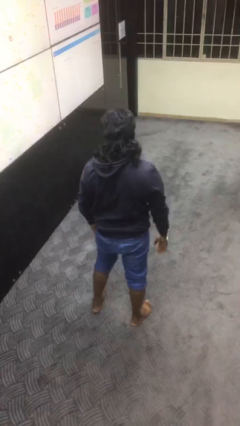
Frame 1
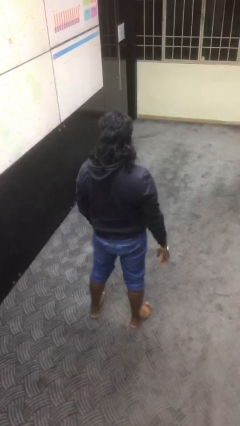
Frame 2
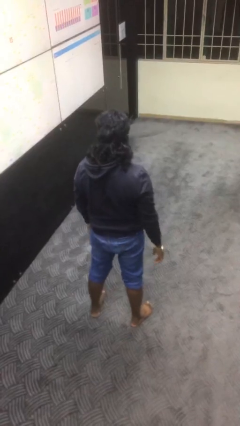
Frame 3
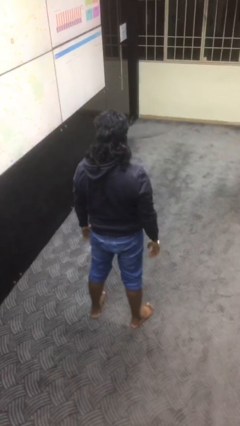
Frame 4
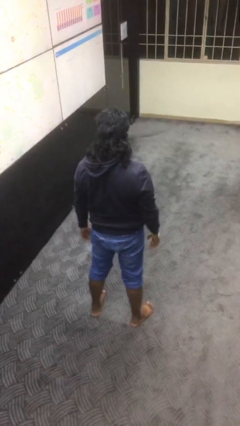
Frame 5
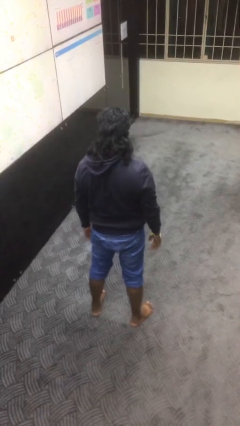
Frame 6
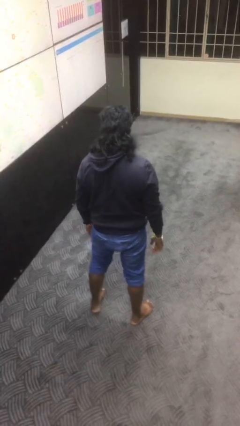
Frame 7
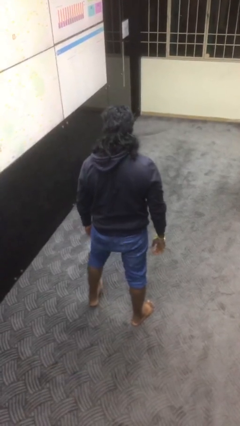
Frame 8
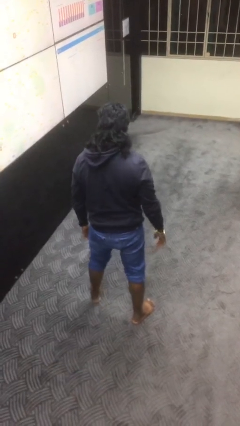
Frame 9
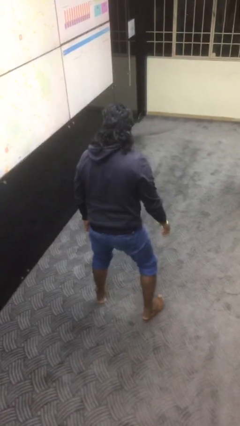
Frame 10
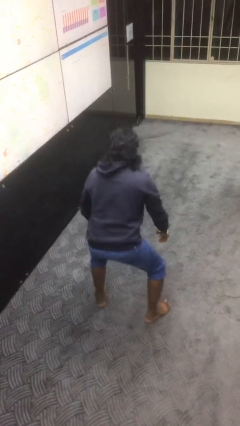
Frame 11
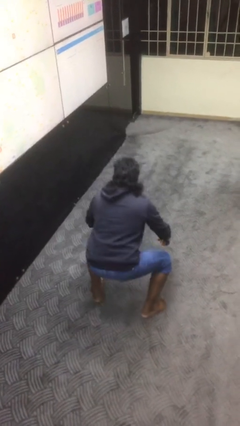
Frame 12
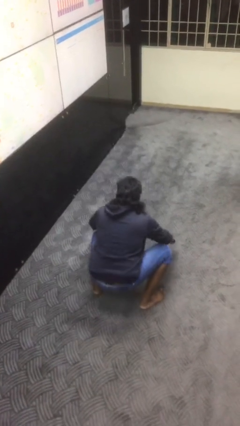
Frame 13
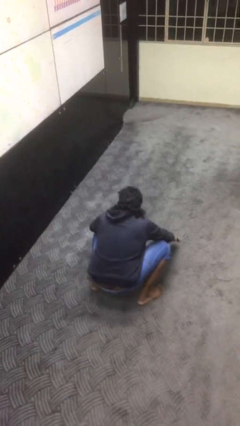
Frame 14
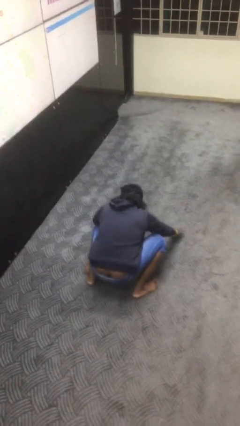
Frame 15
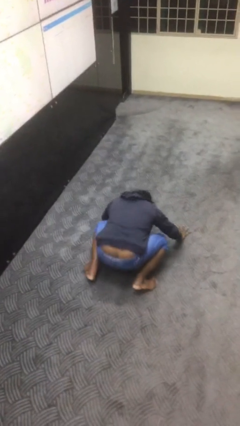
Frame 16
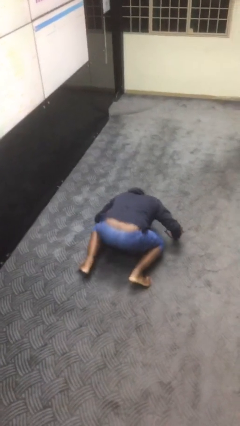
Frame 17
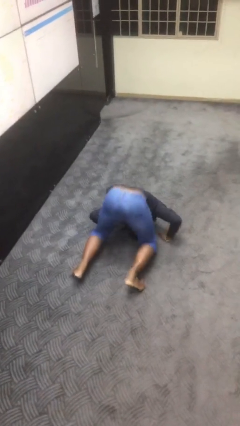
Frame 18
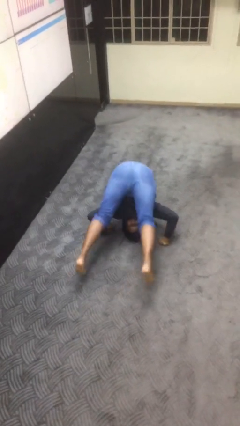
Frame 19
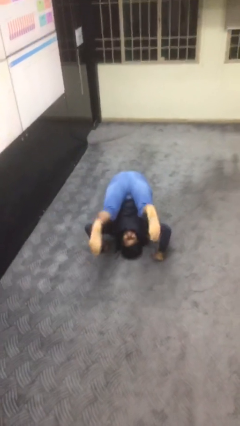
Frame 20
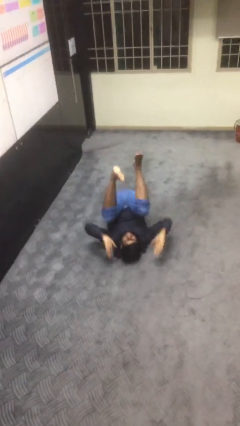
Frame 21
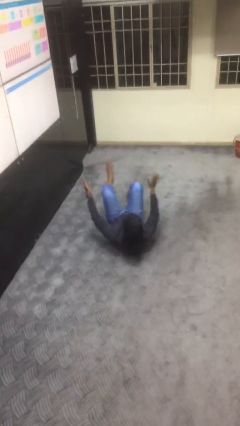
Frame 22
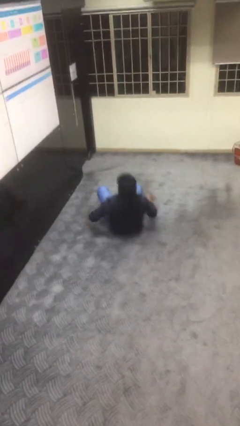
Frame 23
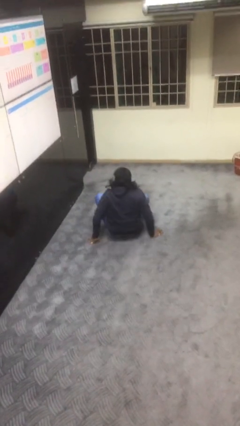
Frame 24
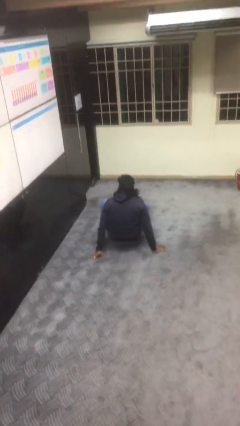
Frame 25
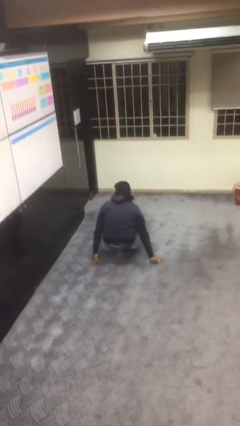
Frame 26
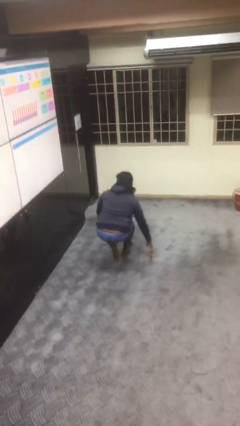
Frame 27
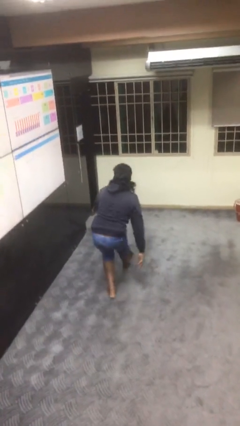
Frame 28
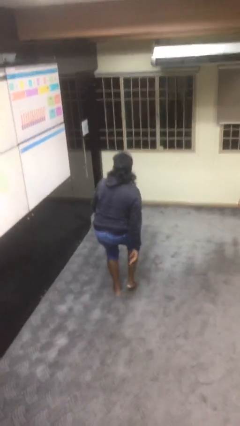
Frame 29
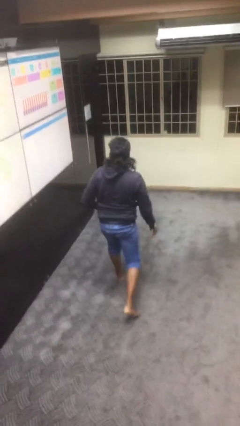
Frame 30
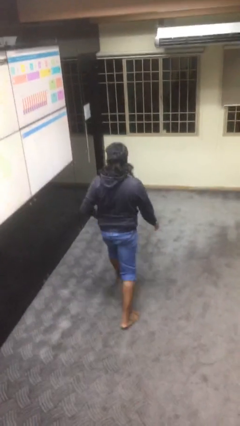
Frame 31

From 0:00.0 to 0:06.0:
person somersaults

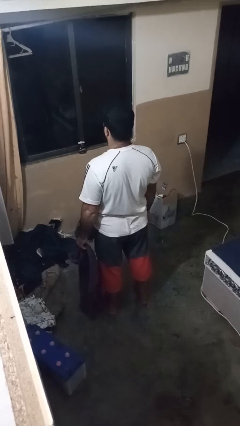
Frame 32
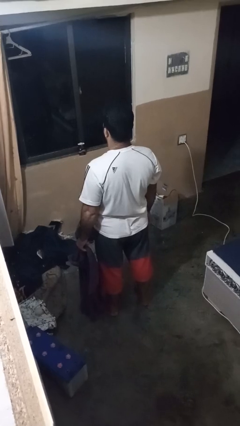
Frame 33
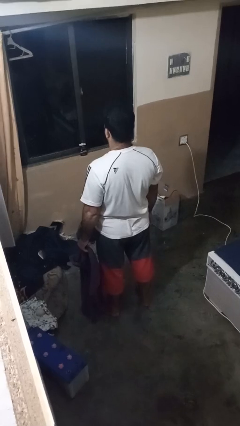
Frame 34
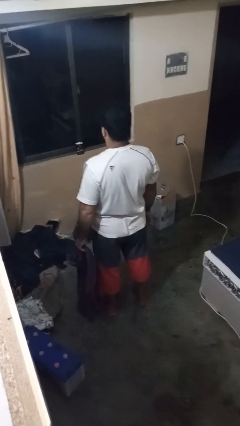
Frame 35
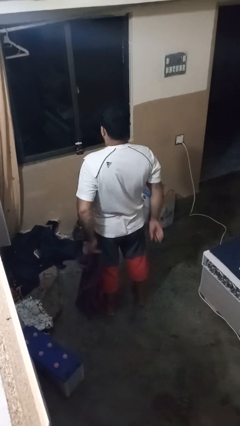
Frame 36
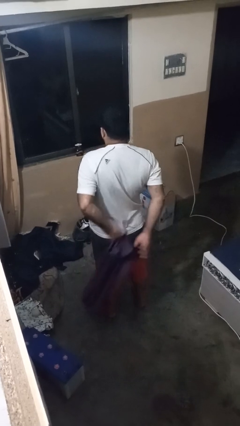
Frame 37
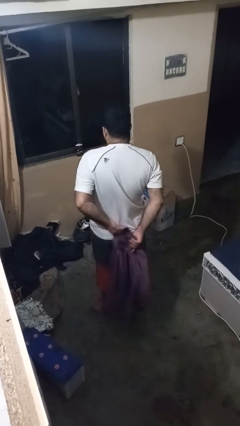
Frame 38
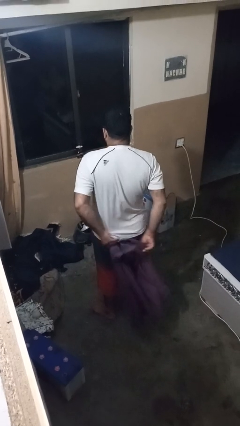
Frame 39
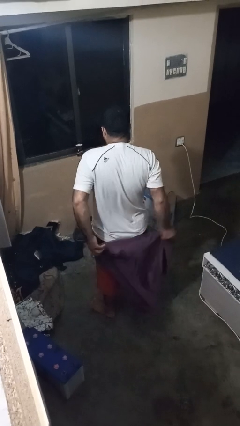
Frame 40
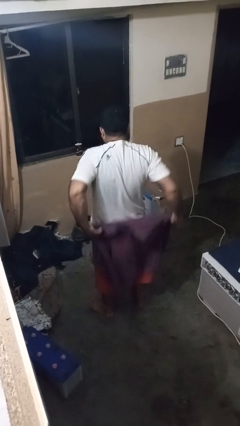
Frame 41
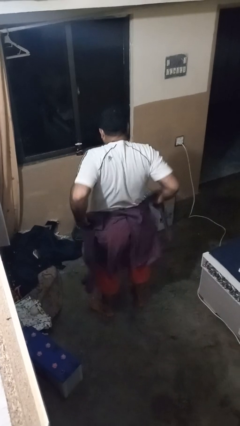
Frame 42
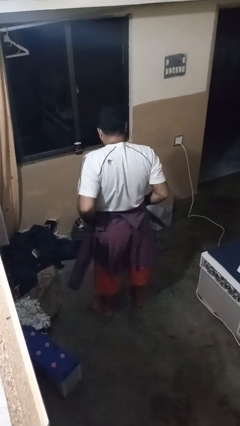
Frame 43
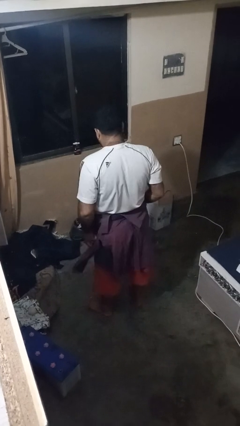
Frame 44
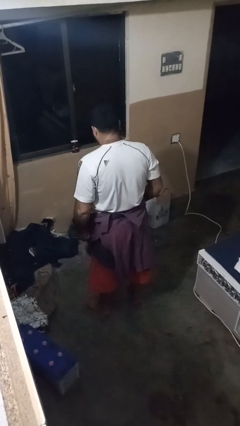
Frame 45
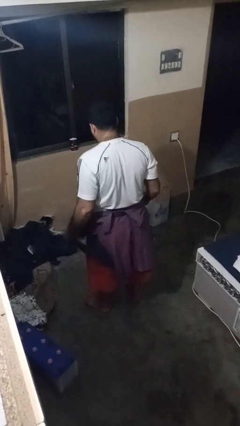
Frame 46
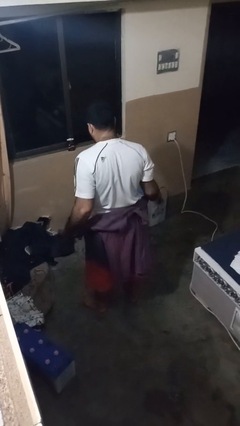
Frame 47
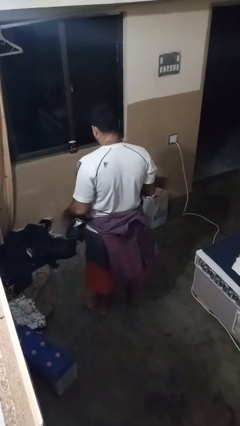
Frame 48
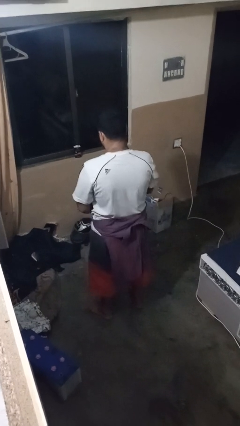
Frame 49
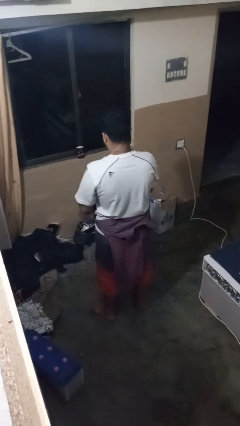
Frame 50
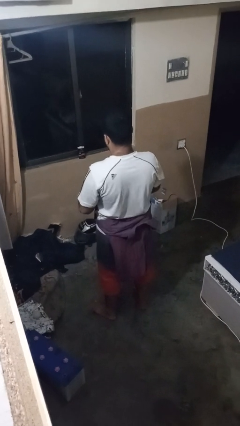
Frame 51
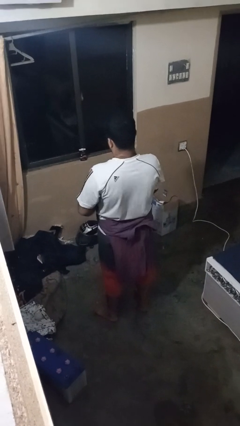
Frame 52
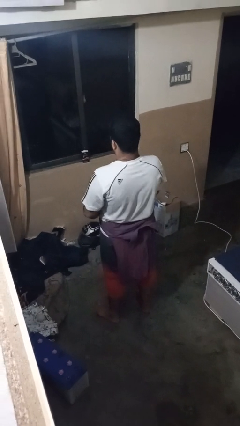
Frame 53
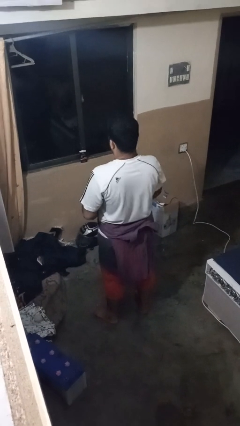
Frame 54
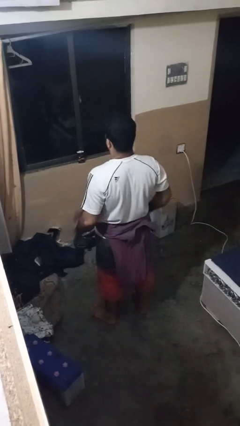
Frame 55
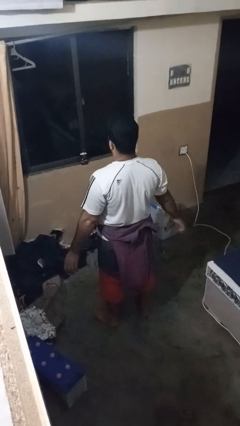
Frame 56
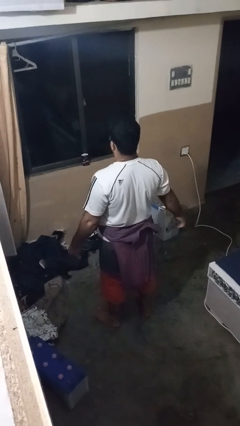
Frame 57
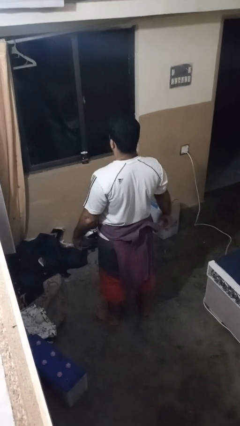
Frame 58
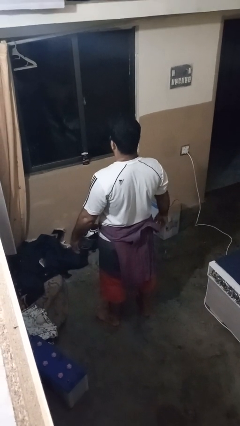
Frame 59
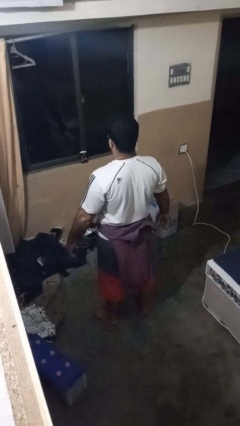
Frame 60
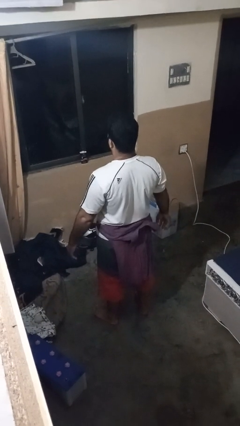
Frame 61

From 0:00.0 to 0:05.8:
person ties jacket around waist

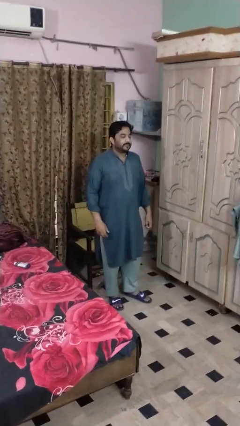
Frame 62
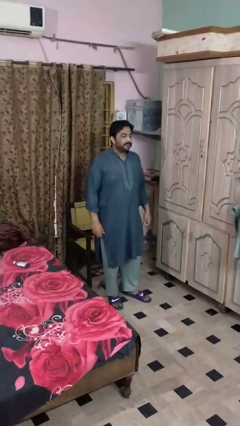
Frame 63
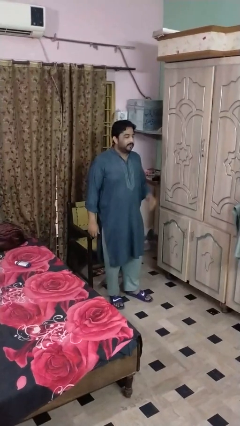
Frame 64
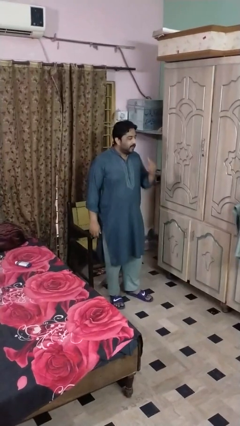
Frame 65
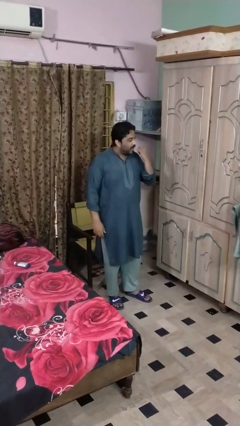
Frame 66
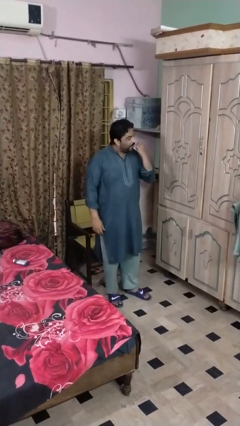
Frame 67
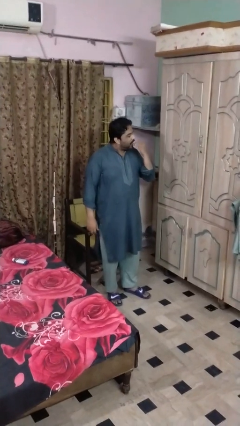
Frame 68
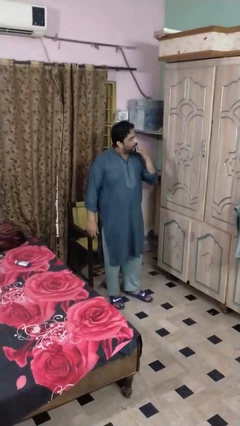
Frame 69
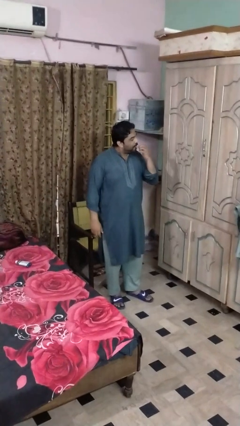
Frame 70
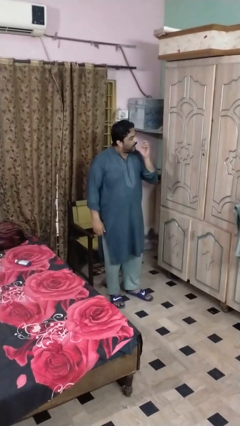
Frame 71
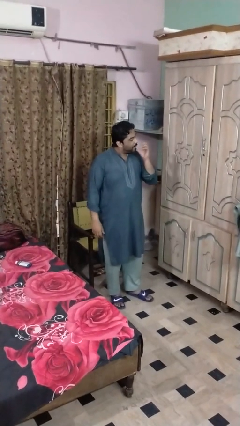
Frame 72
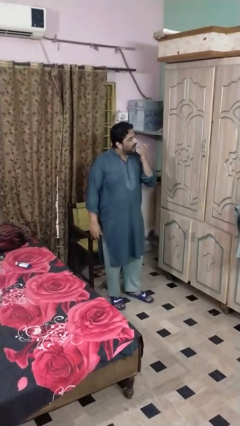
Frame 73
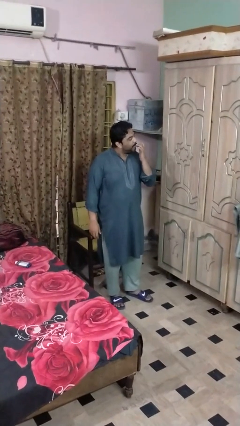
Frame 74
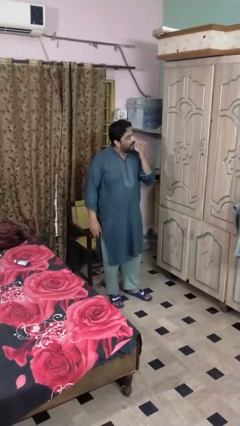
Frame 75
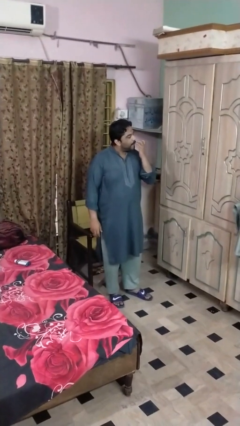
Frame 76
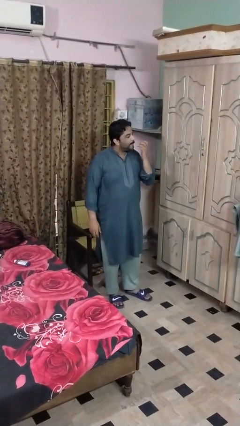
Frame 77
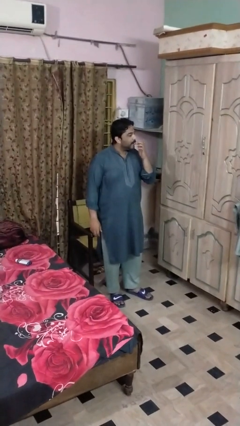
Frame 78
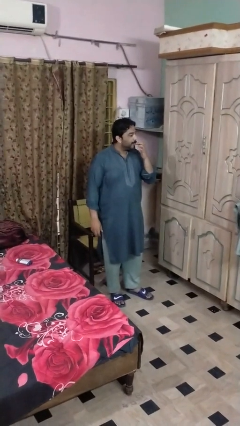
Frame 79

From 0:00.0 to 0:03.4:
person licks fingers

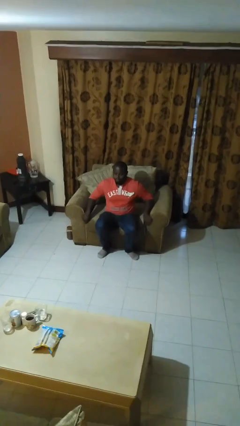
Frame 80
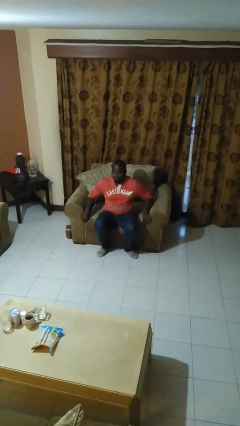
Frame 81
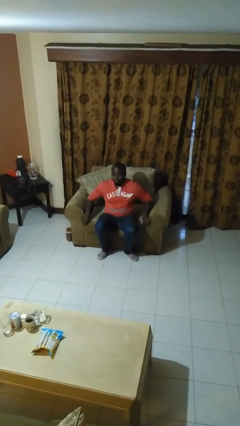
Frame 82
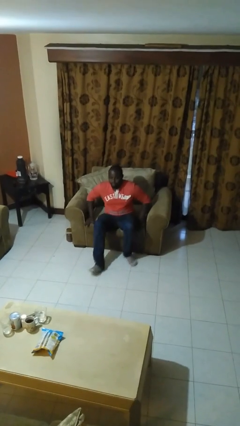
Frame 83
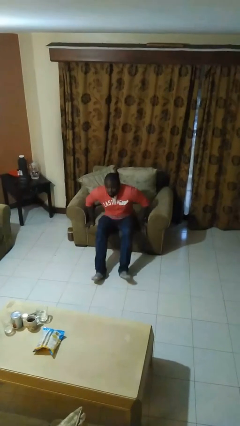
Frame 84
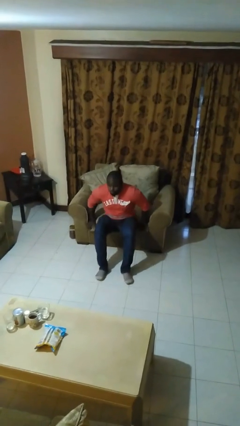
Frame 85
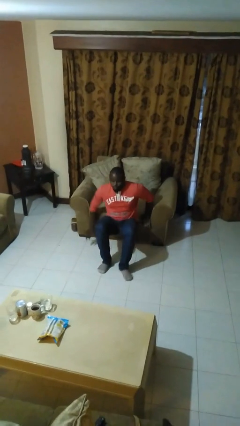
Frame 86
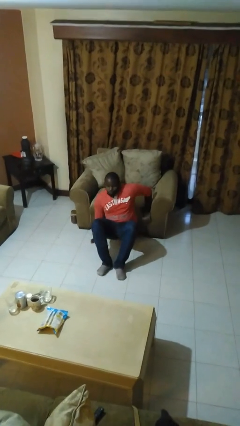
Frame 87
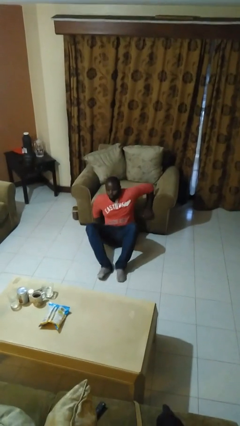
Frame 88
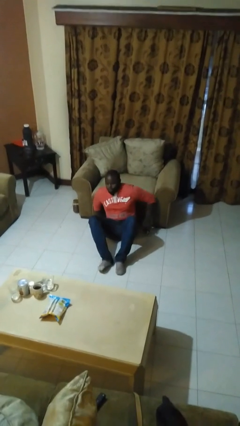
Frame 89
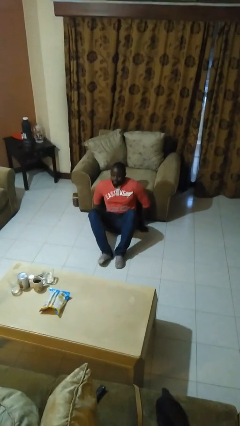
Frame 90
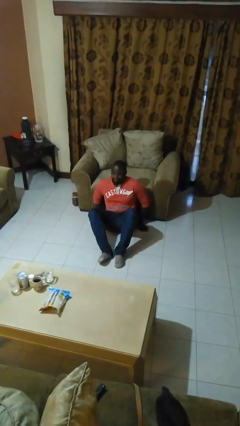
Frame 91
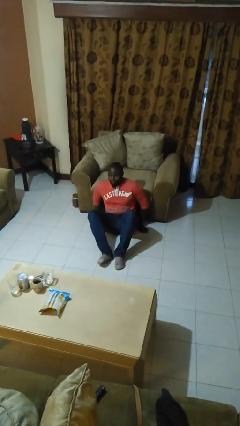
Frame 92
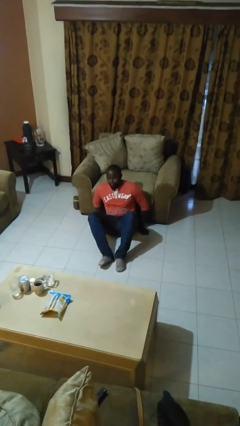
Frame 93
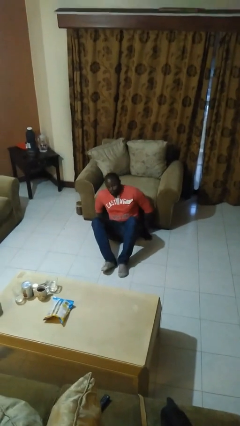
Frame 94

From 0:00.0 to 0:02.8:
person falls from chair
